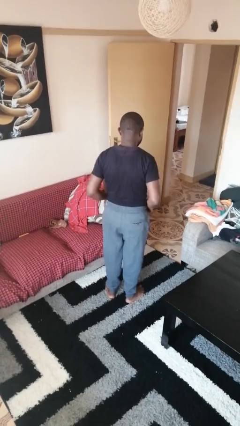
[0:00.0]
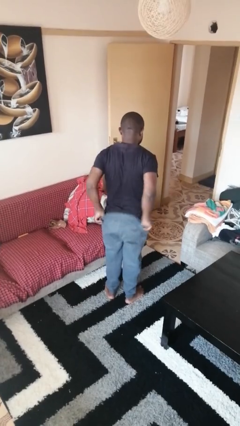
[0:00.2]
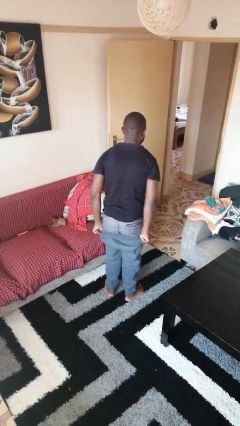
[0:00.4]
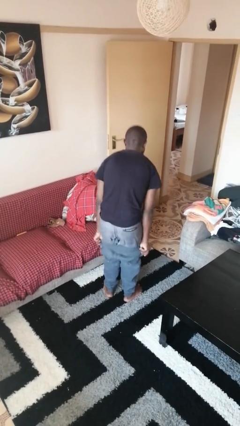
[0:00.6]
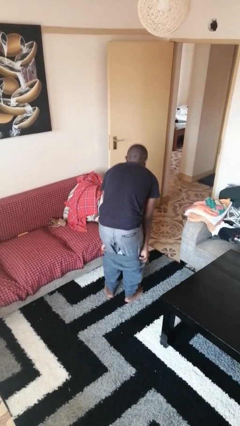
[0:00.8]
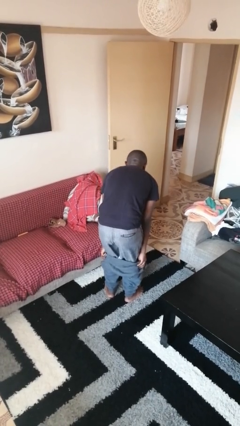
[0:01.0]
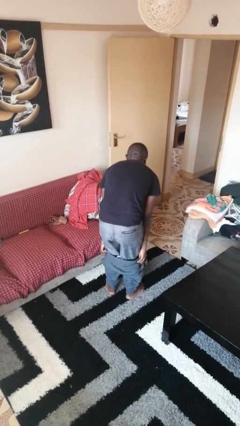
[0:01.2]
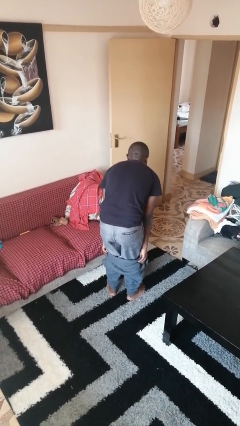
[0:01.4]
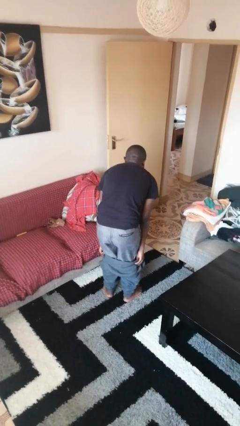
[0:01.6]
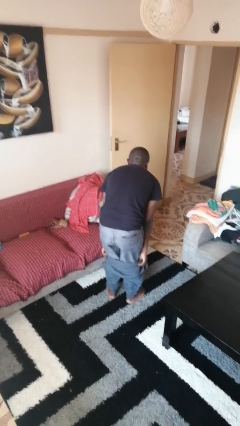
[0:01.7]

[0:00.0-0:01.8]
person takes off pants

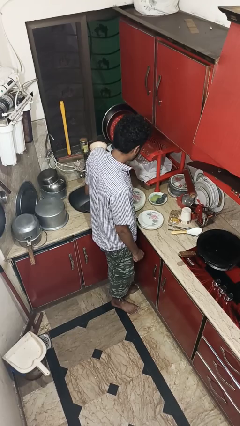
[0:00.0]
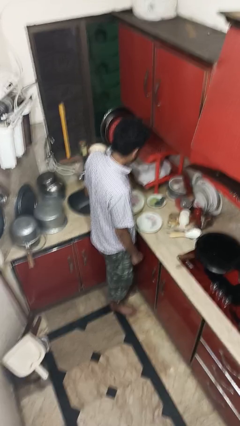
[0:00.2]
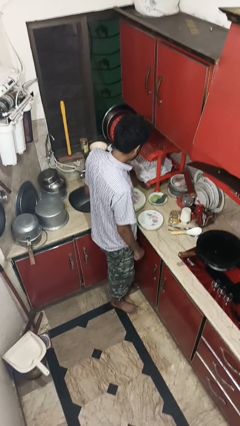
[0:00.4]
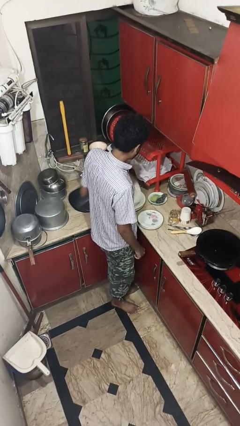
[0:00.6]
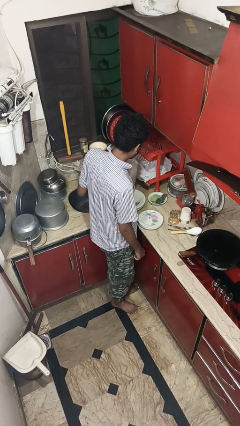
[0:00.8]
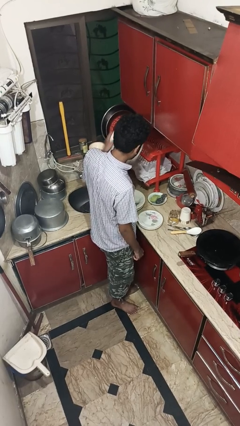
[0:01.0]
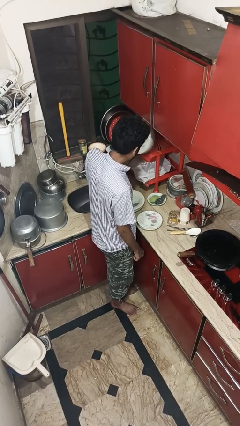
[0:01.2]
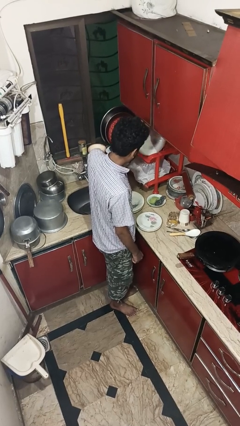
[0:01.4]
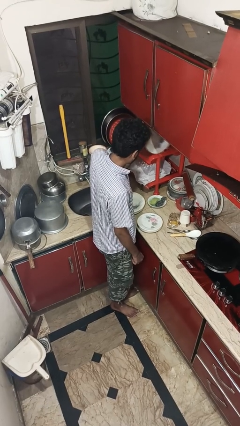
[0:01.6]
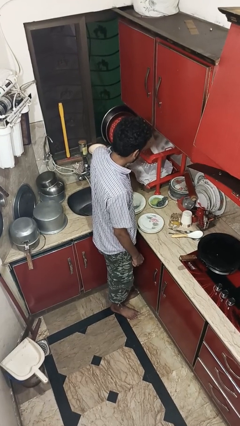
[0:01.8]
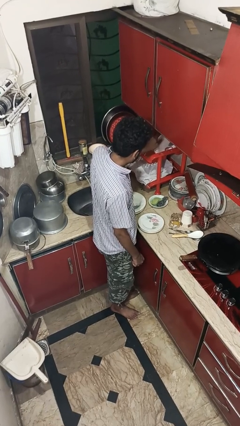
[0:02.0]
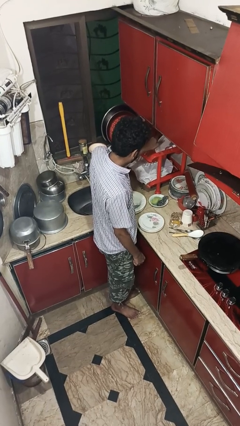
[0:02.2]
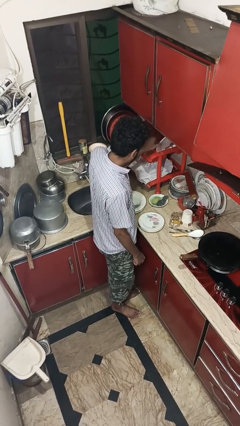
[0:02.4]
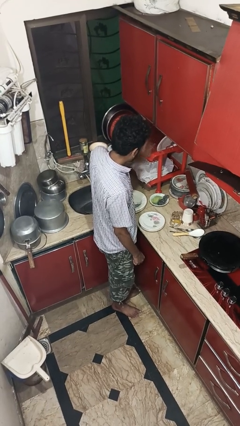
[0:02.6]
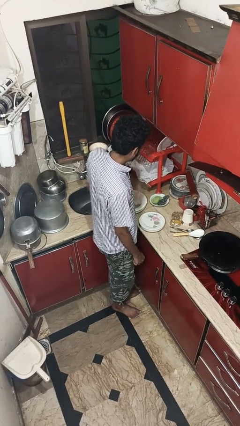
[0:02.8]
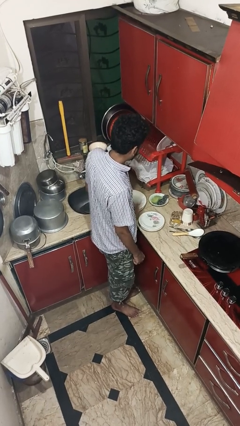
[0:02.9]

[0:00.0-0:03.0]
person loads dishwasher

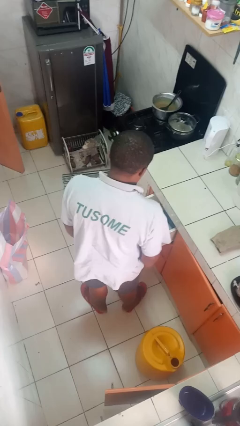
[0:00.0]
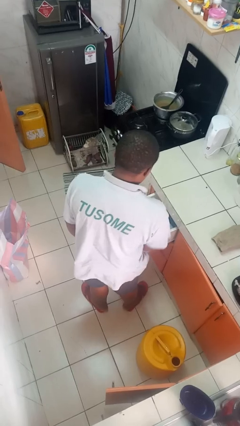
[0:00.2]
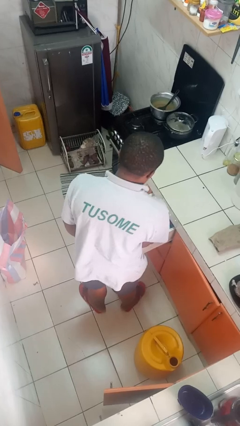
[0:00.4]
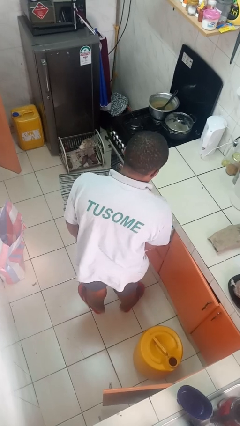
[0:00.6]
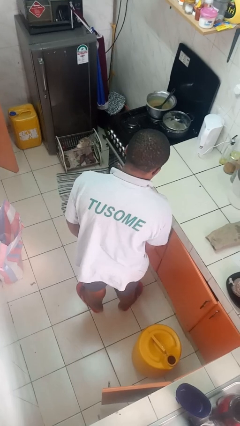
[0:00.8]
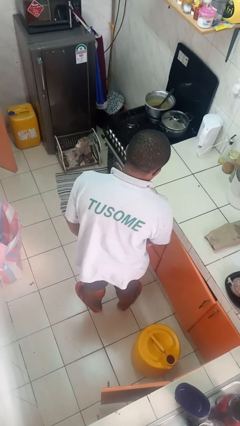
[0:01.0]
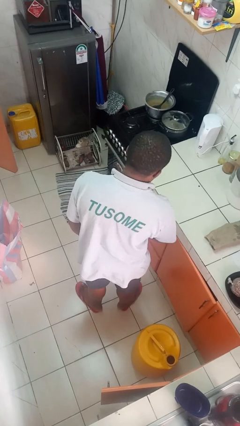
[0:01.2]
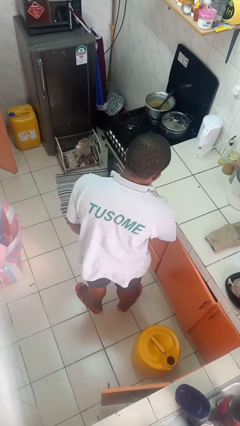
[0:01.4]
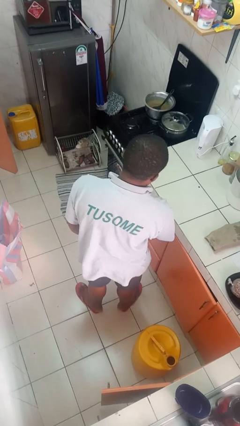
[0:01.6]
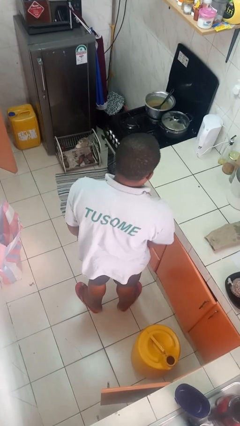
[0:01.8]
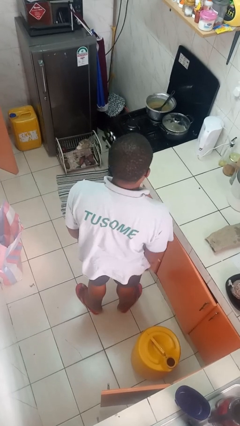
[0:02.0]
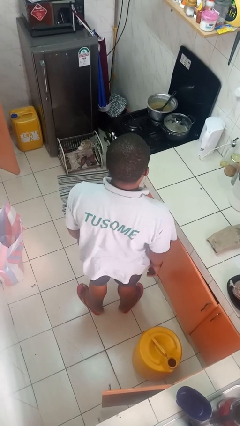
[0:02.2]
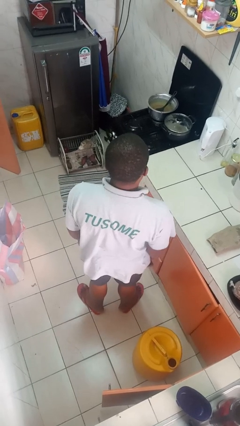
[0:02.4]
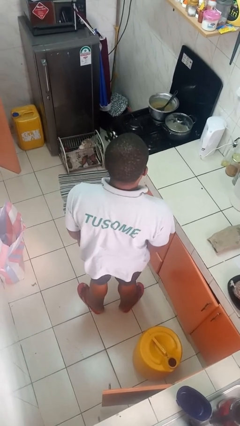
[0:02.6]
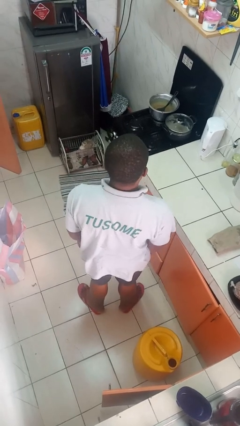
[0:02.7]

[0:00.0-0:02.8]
person closes kitchen drawer

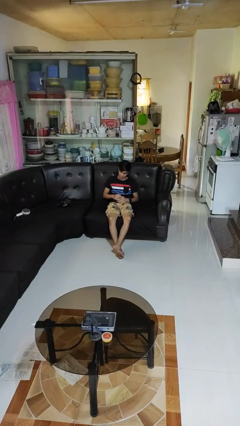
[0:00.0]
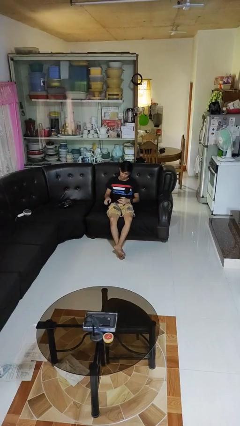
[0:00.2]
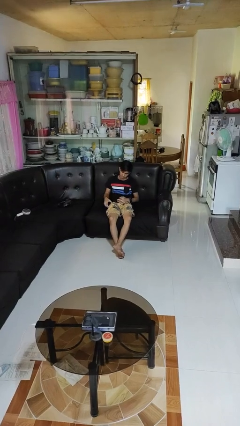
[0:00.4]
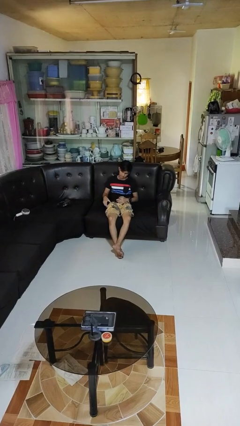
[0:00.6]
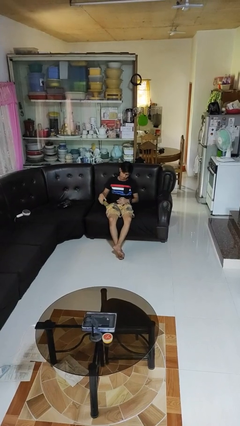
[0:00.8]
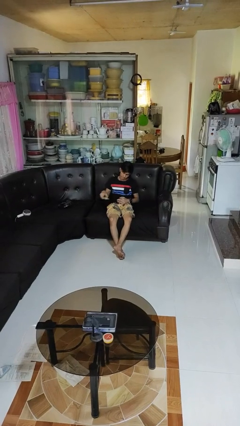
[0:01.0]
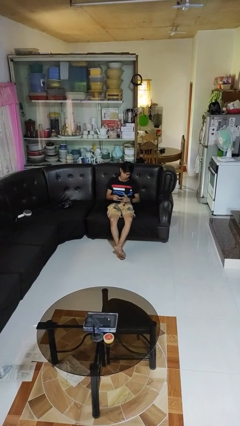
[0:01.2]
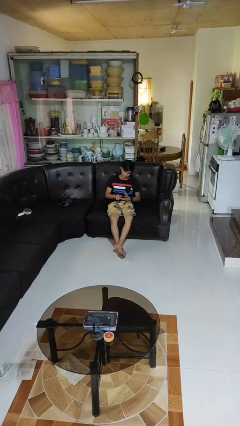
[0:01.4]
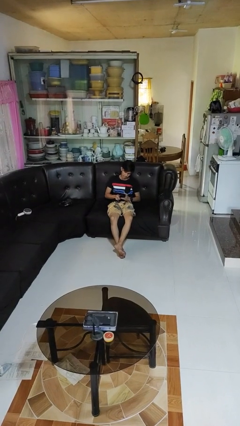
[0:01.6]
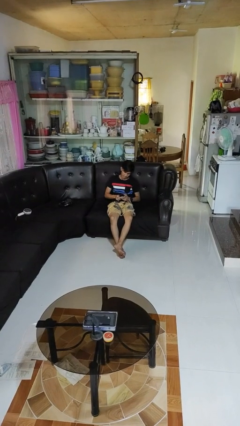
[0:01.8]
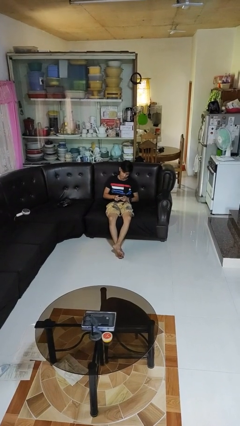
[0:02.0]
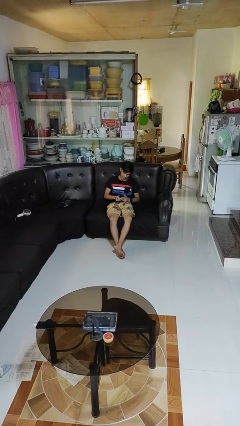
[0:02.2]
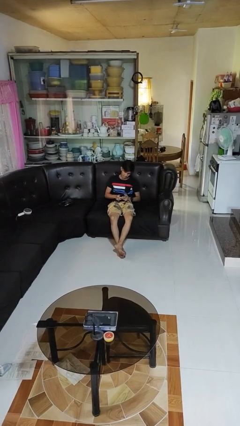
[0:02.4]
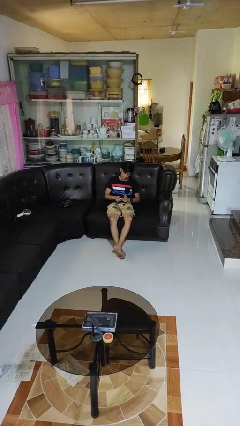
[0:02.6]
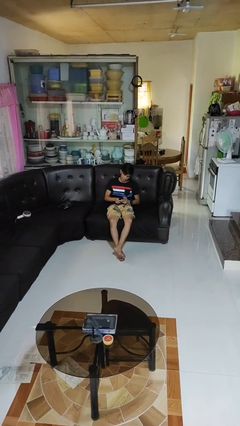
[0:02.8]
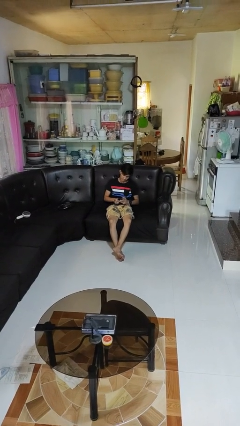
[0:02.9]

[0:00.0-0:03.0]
person takes phone from pocket

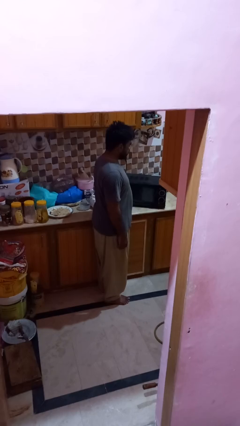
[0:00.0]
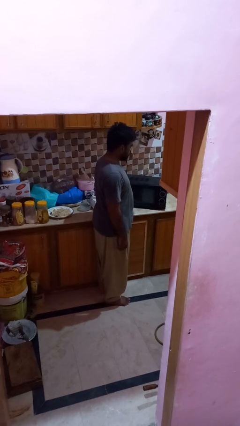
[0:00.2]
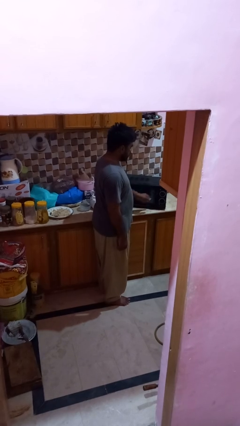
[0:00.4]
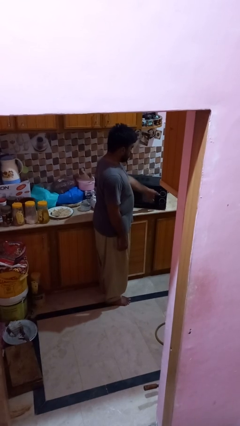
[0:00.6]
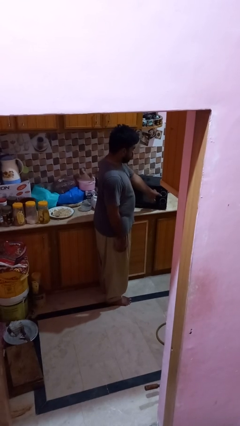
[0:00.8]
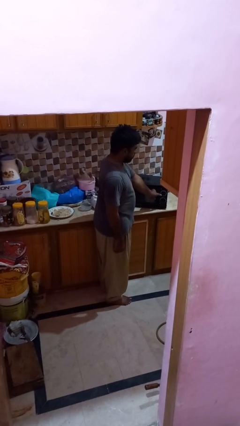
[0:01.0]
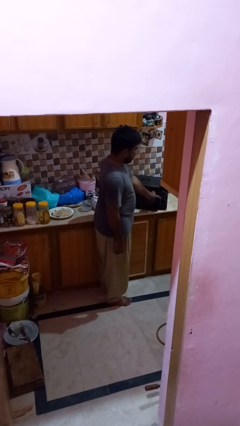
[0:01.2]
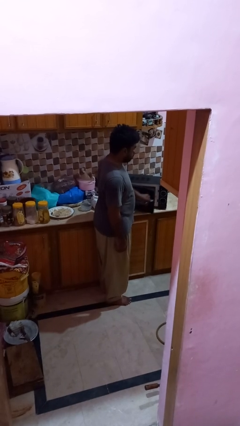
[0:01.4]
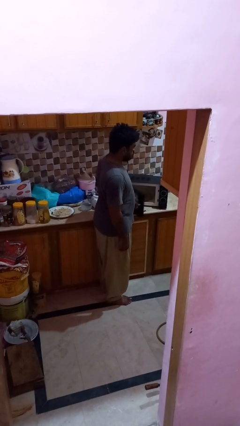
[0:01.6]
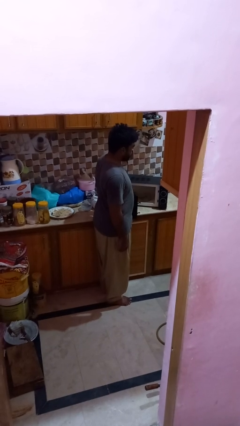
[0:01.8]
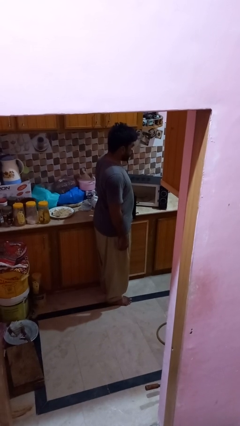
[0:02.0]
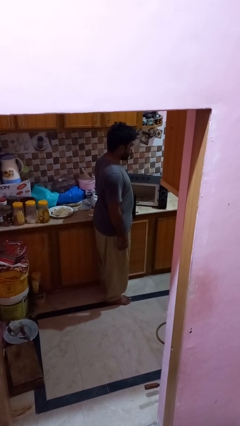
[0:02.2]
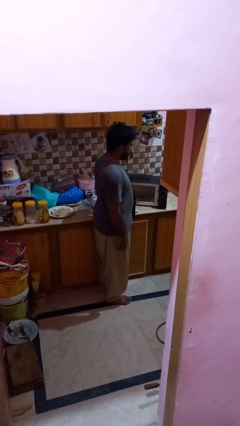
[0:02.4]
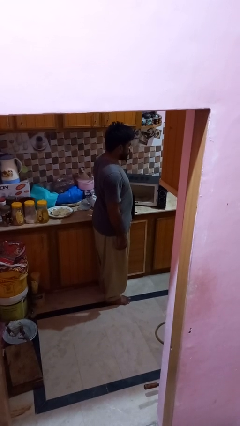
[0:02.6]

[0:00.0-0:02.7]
person opens microwave

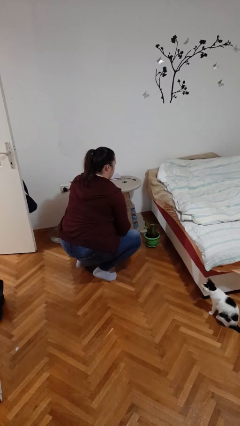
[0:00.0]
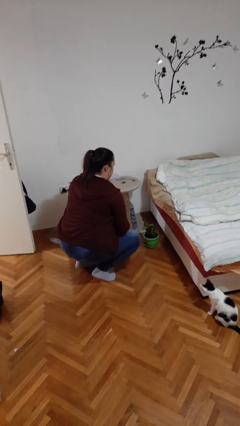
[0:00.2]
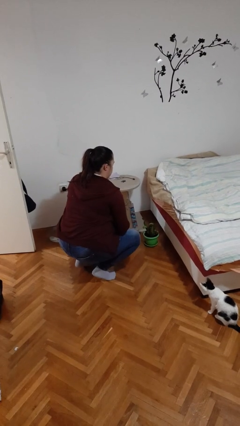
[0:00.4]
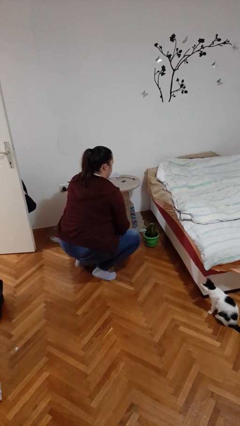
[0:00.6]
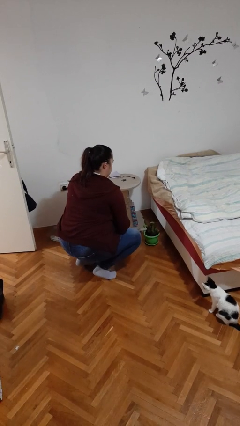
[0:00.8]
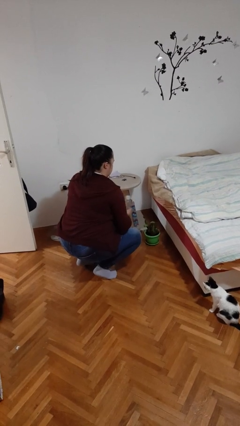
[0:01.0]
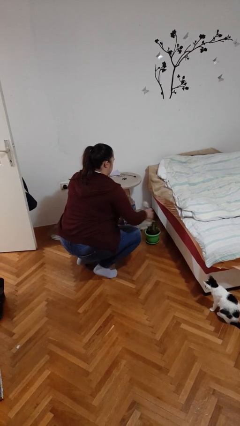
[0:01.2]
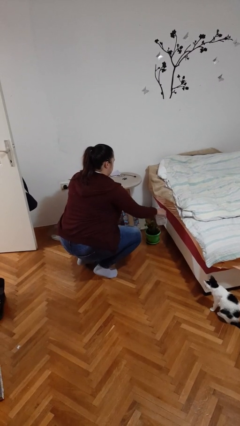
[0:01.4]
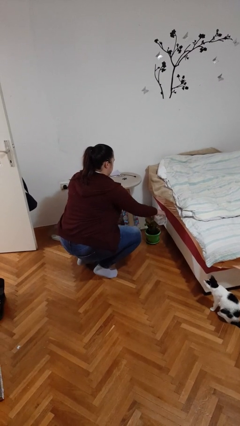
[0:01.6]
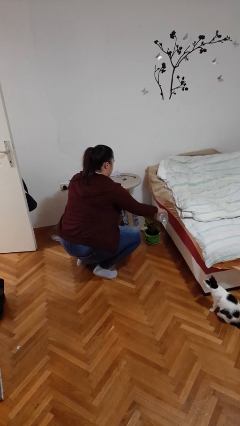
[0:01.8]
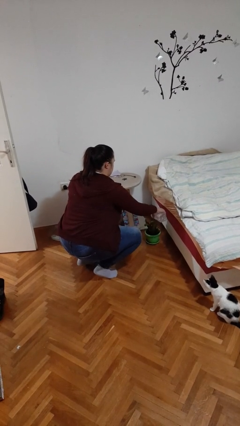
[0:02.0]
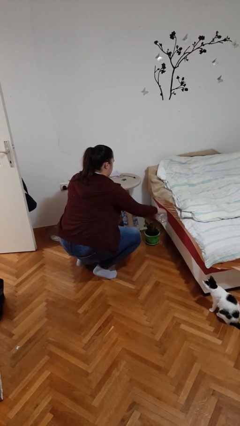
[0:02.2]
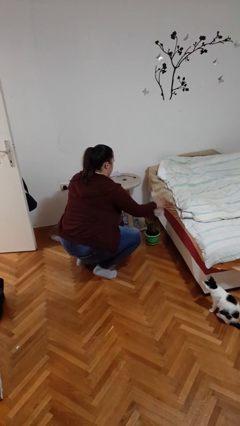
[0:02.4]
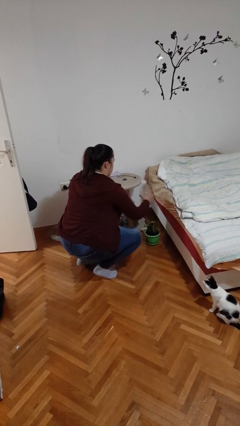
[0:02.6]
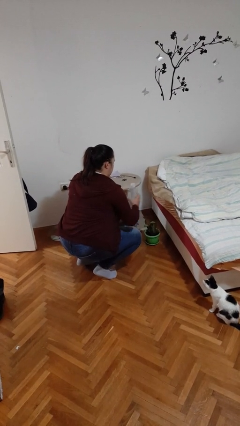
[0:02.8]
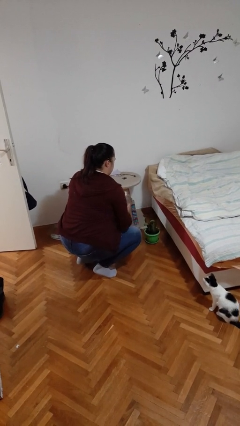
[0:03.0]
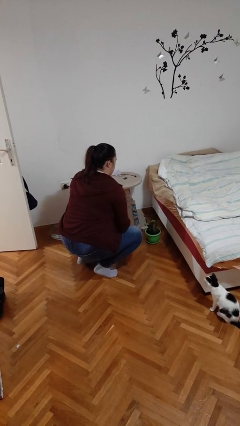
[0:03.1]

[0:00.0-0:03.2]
person waters houseplant

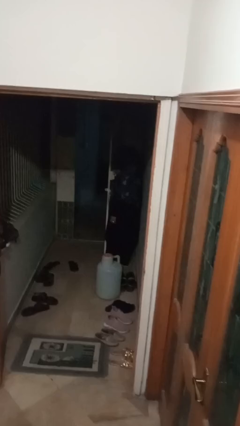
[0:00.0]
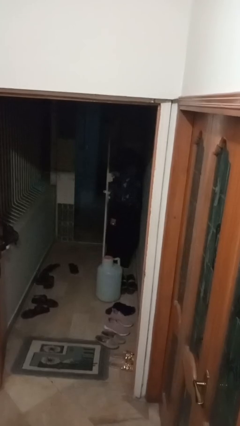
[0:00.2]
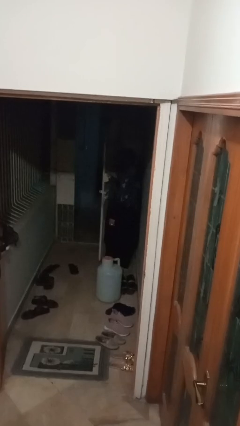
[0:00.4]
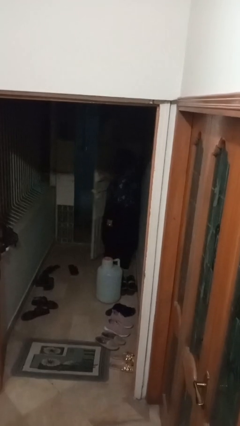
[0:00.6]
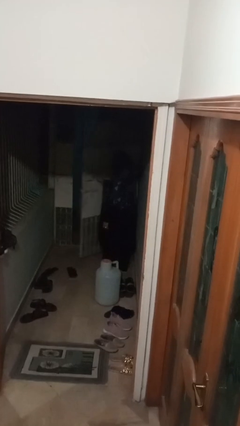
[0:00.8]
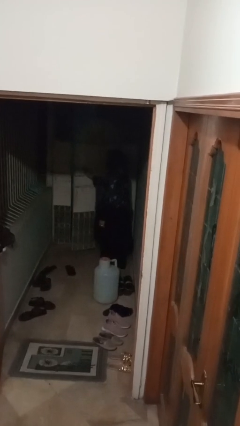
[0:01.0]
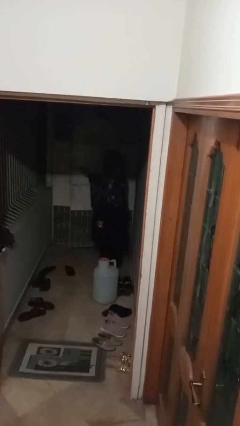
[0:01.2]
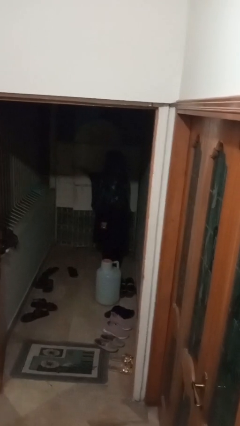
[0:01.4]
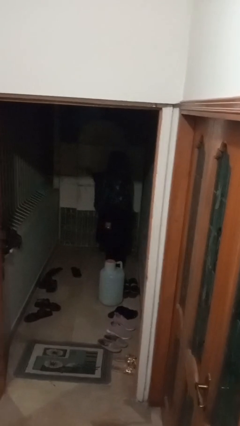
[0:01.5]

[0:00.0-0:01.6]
person closes gate
